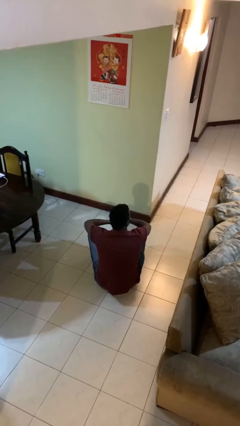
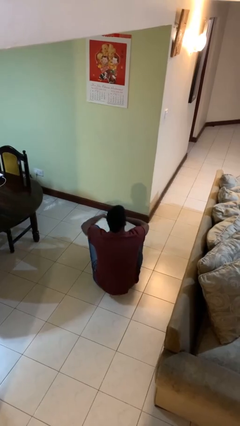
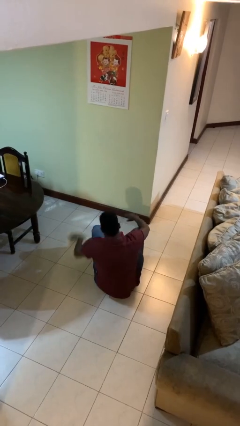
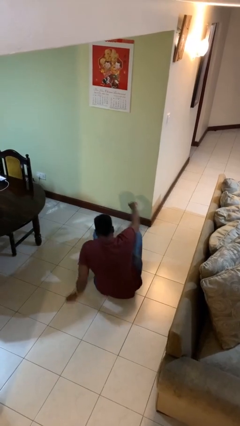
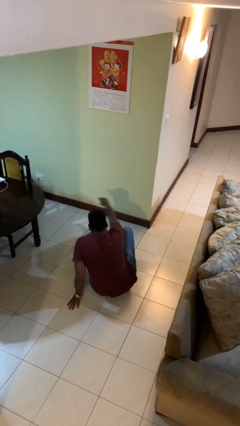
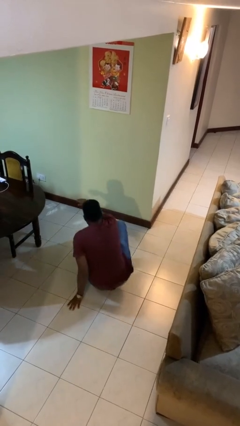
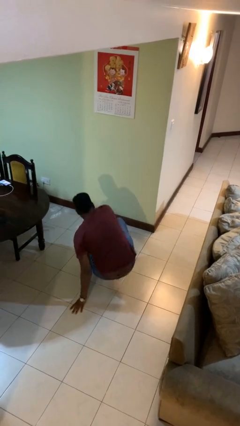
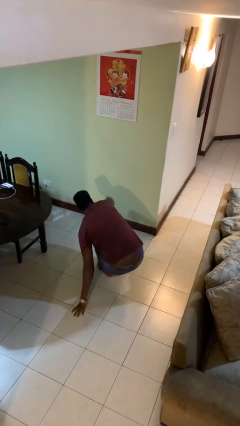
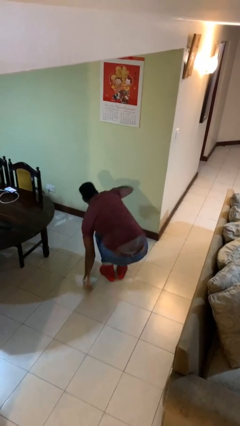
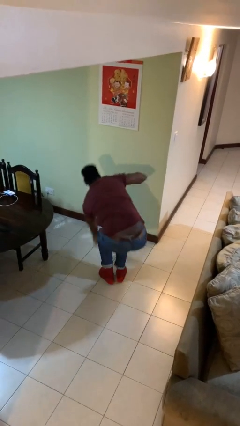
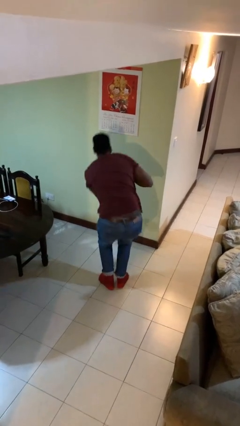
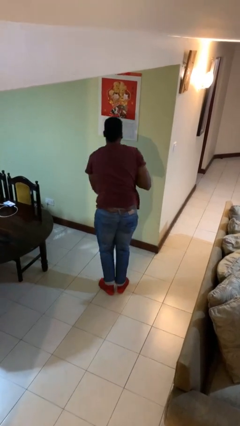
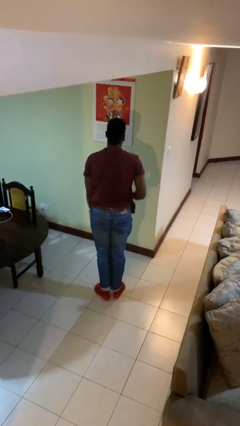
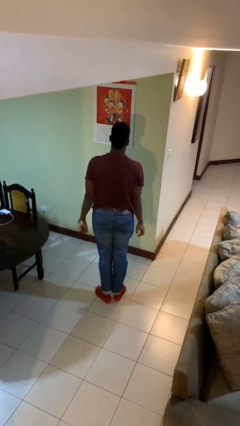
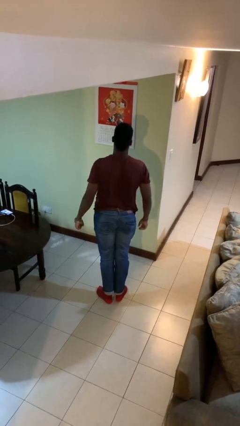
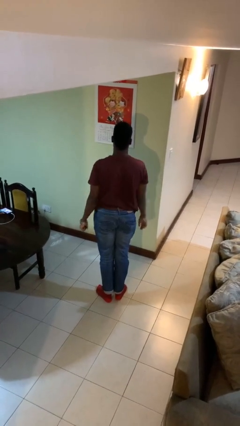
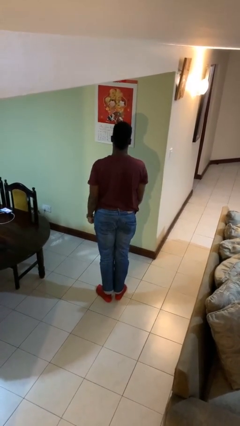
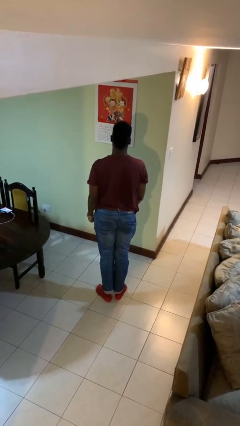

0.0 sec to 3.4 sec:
person stands up from floor

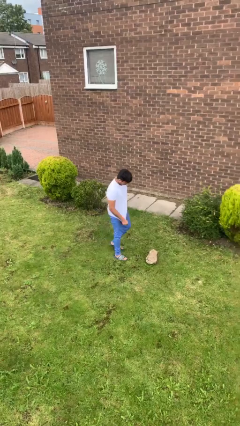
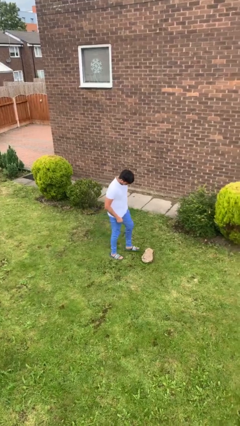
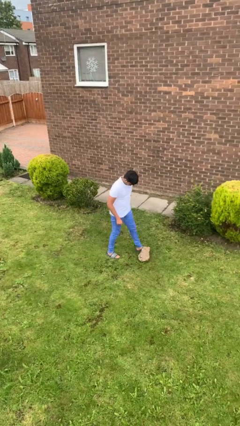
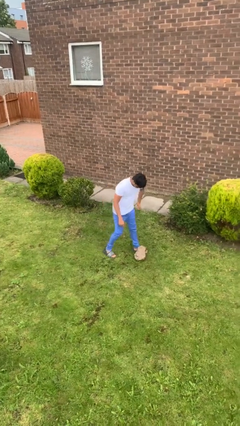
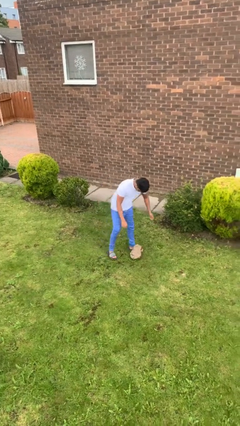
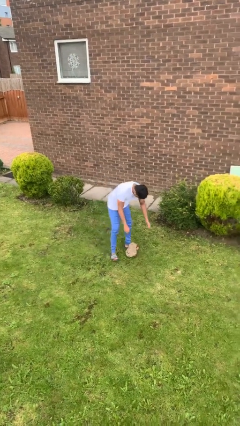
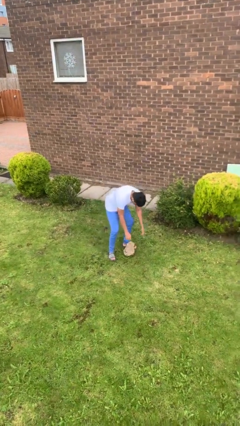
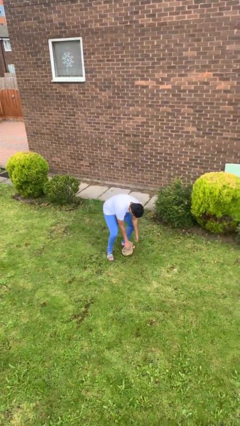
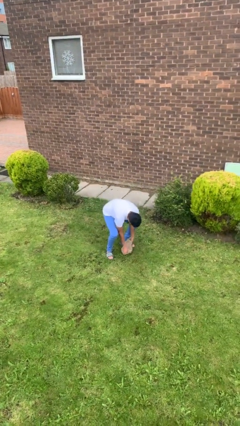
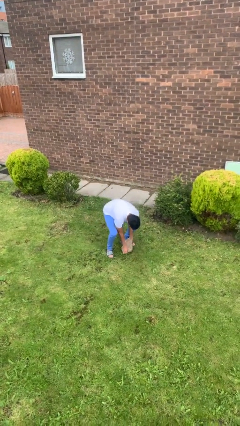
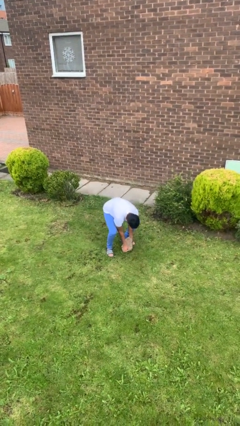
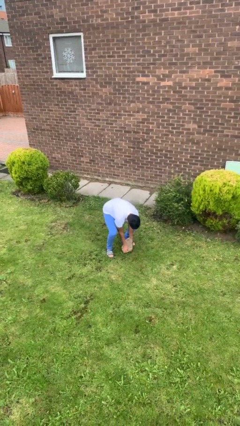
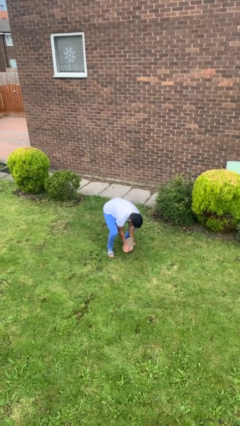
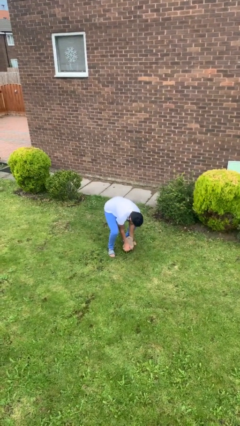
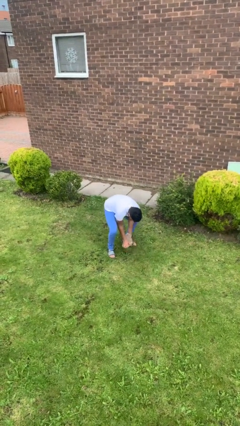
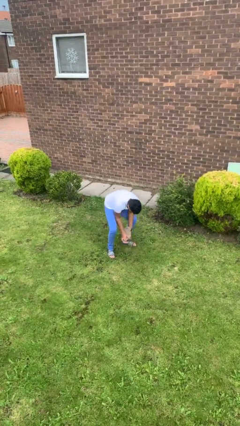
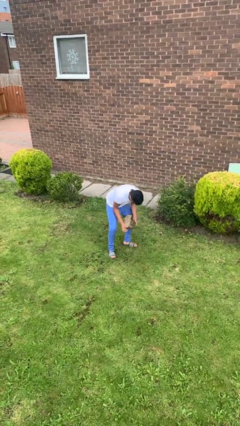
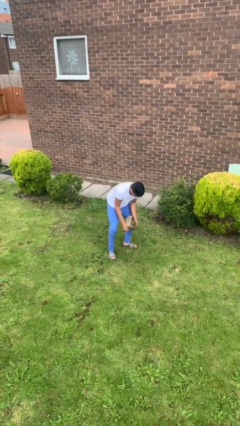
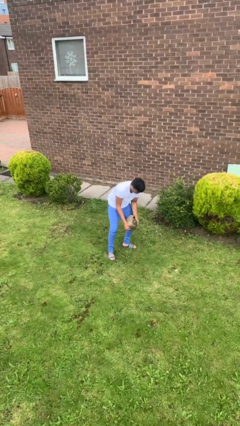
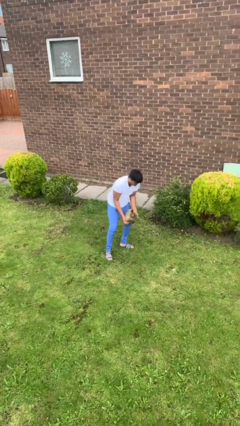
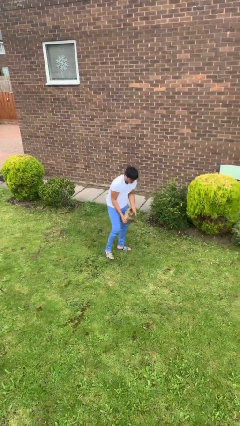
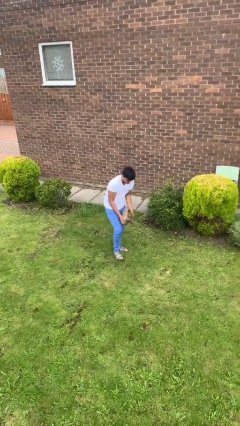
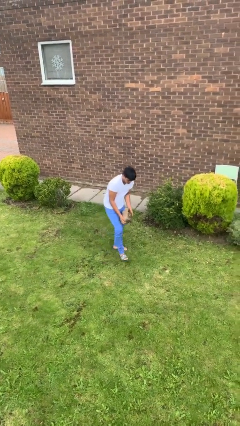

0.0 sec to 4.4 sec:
person picks up object from floor

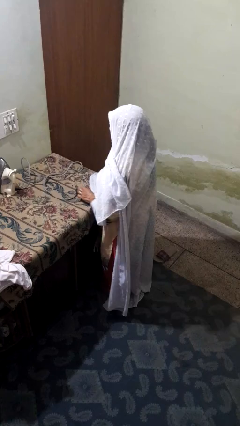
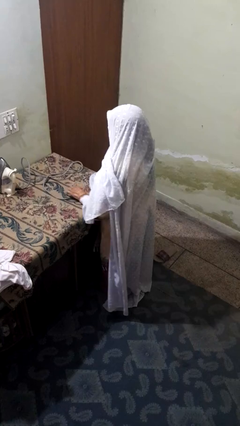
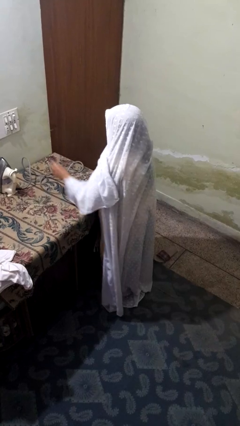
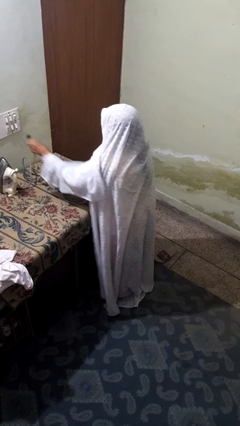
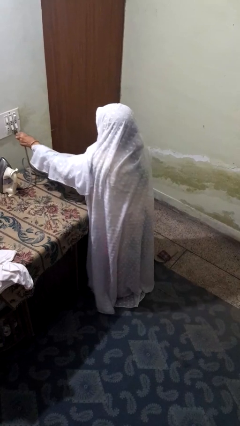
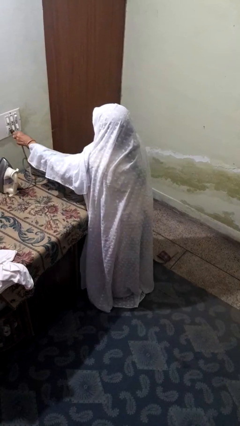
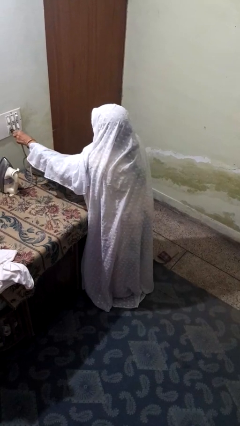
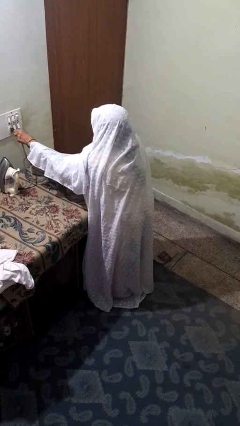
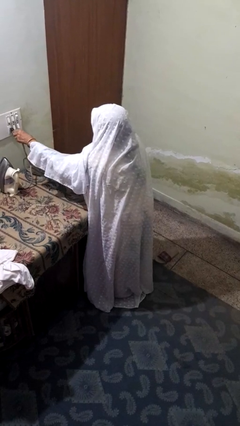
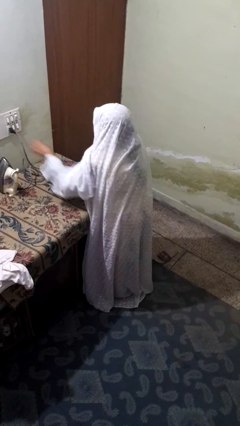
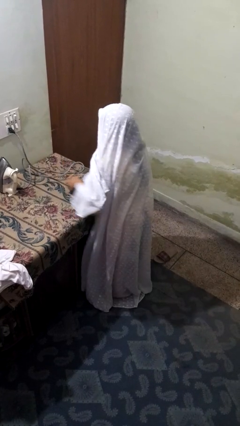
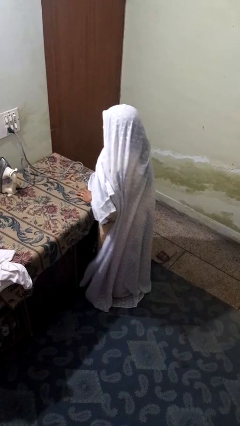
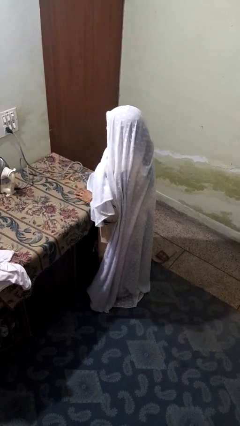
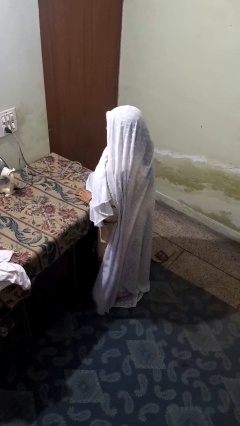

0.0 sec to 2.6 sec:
person plugs into electrical socket

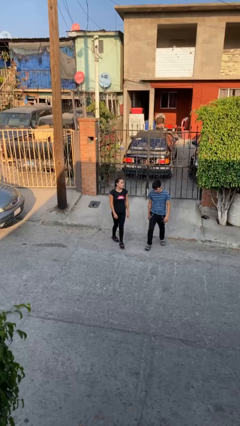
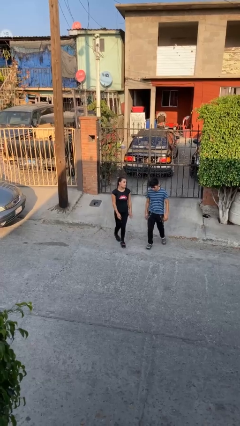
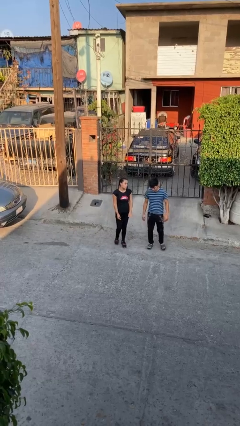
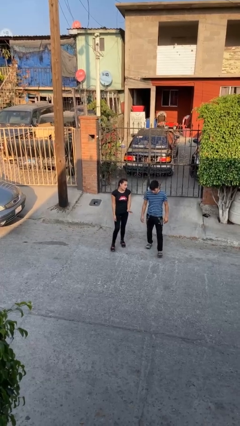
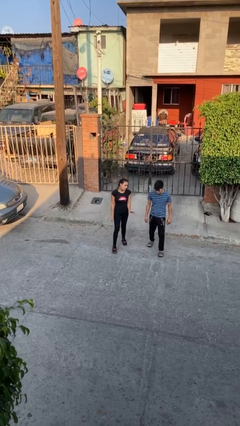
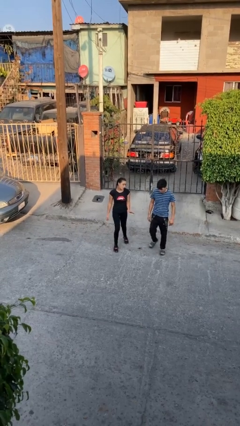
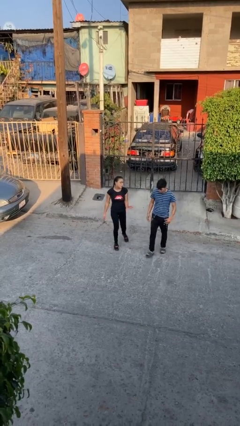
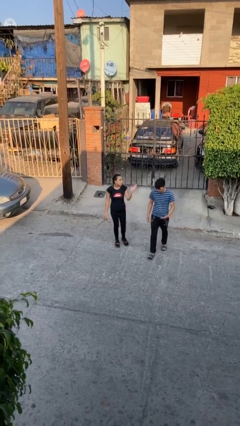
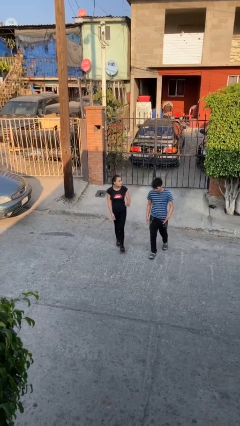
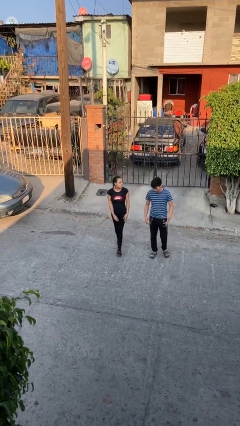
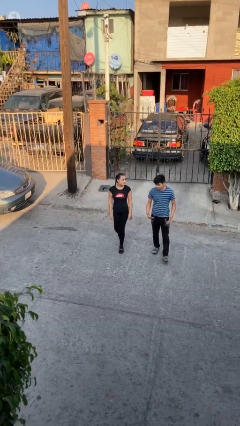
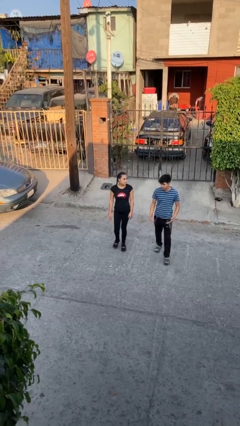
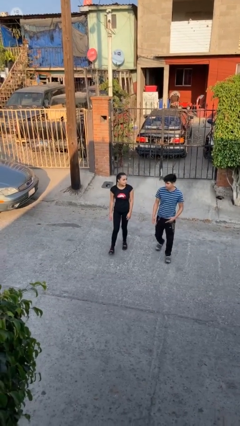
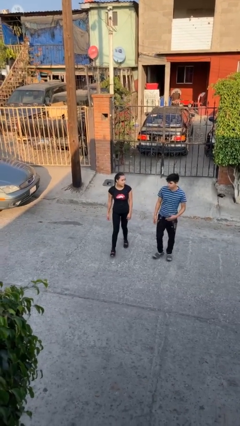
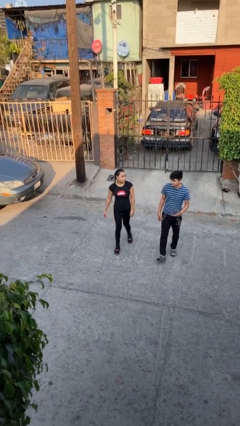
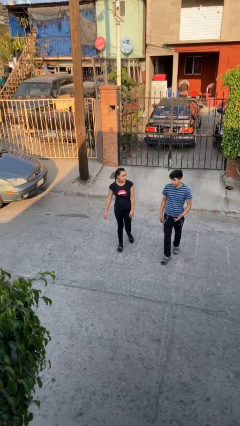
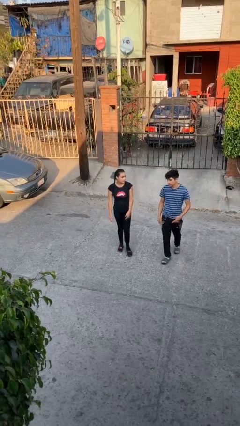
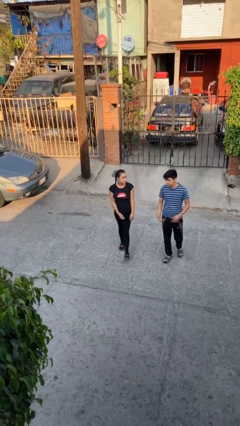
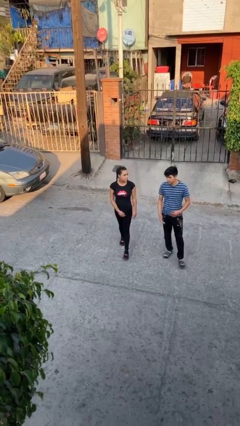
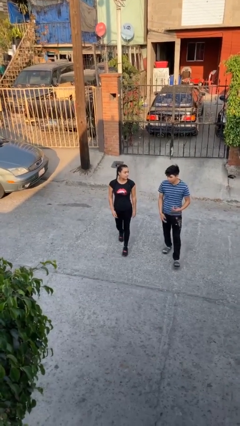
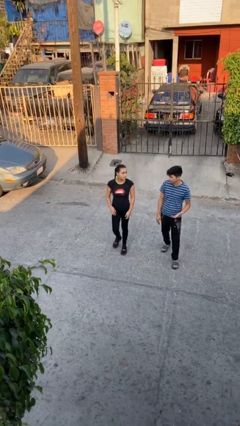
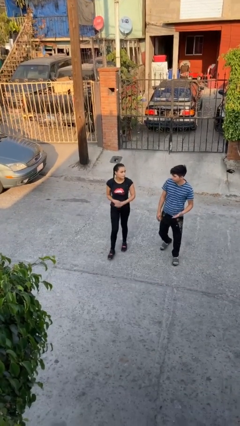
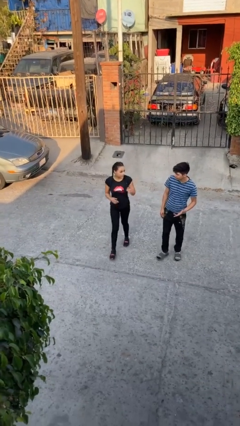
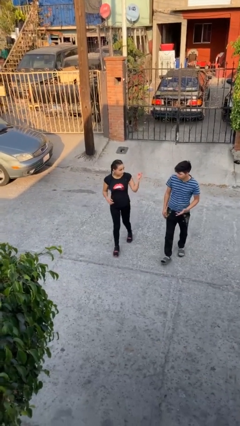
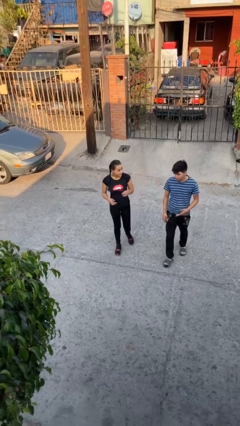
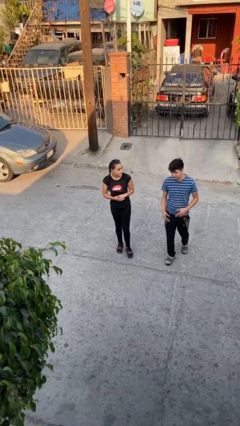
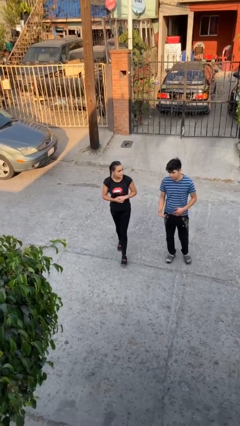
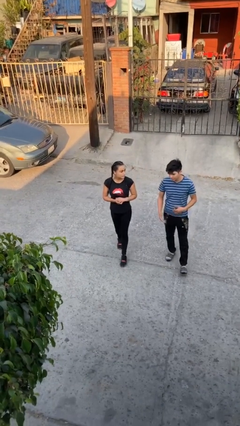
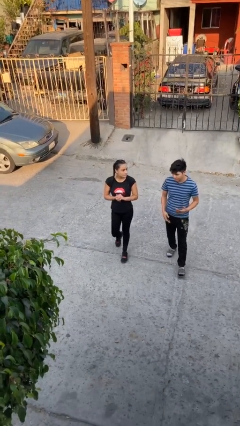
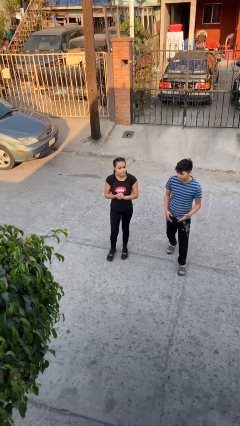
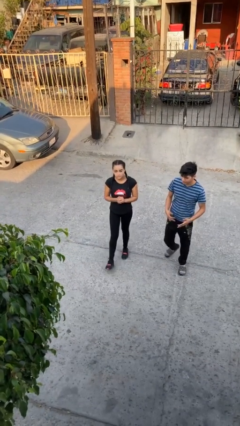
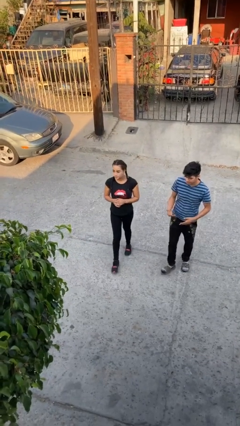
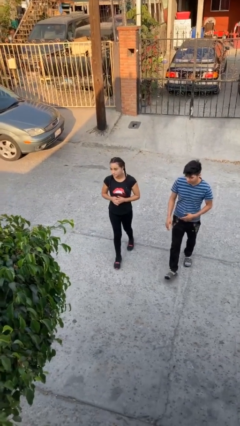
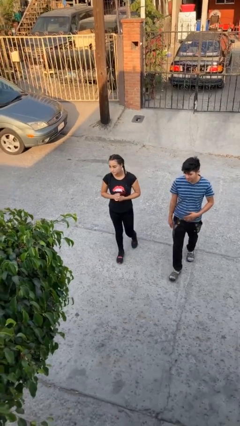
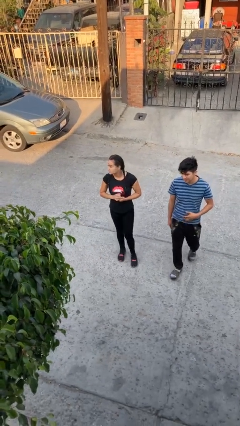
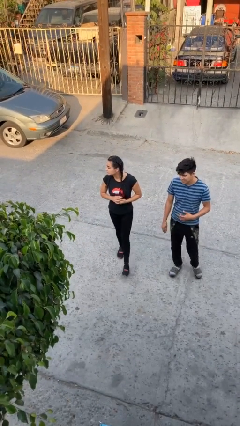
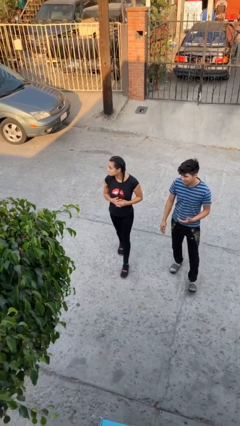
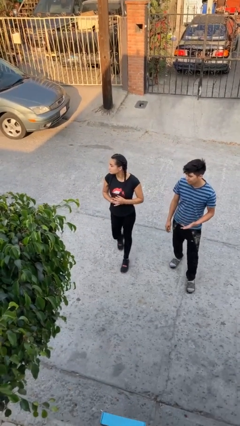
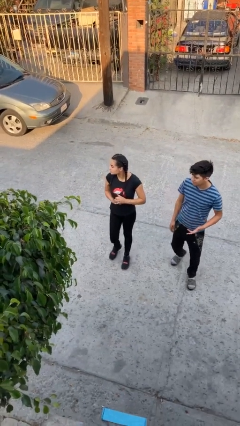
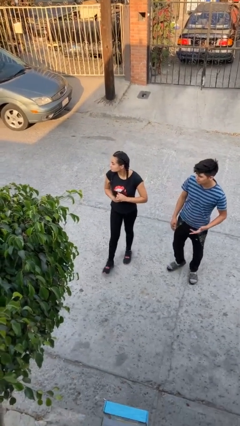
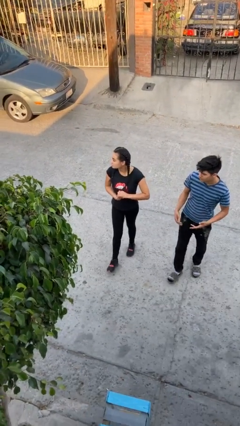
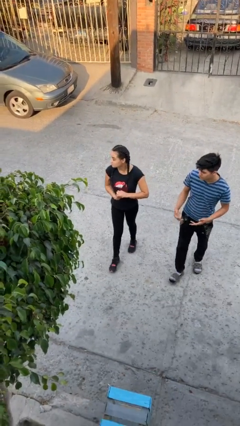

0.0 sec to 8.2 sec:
person talks to person
